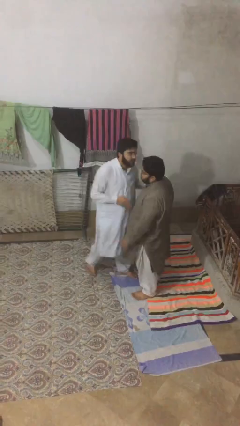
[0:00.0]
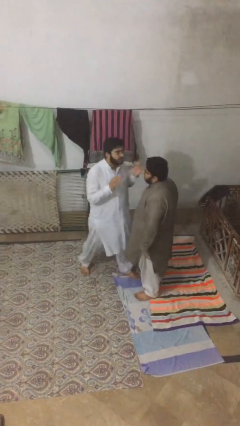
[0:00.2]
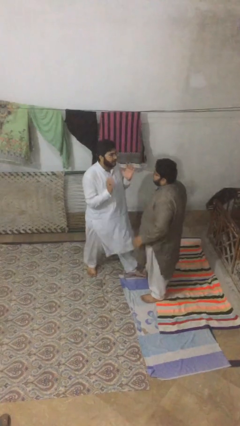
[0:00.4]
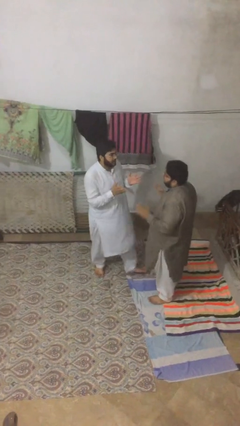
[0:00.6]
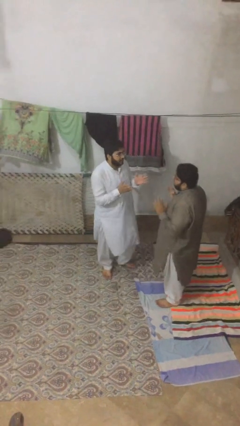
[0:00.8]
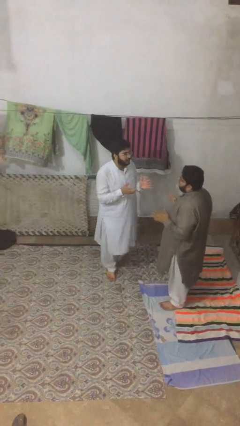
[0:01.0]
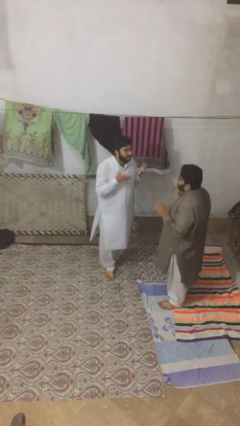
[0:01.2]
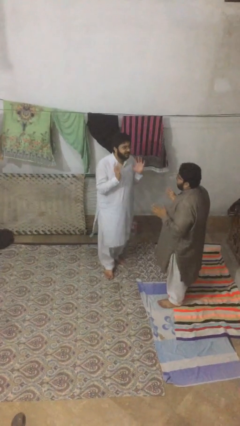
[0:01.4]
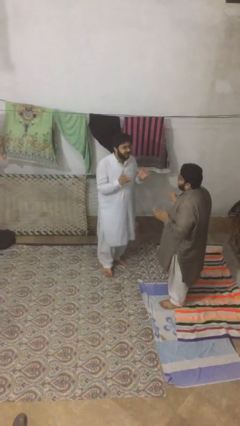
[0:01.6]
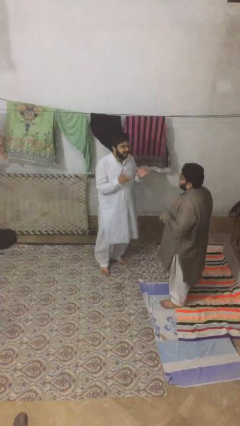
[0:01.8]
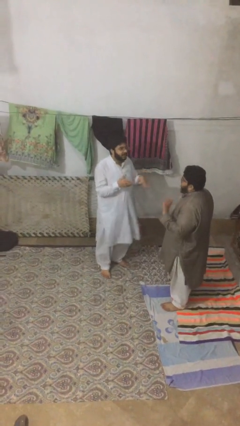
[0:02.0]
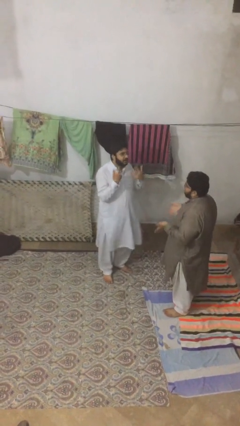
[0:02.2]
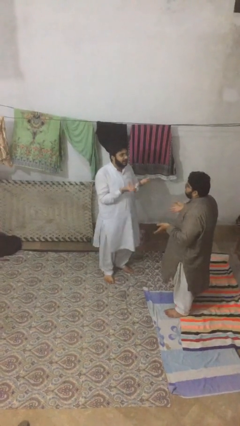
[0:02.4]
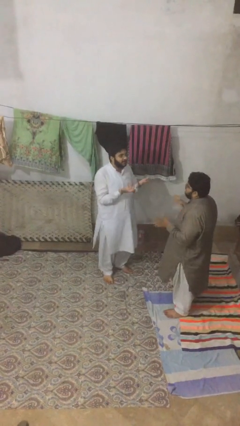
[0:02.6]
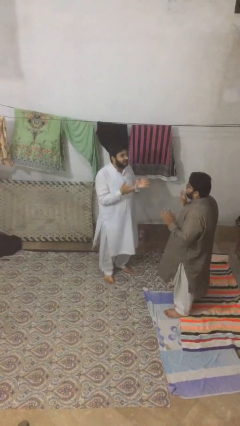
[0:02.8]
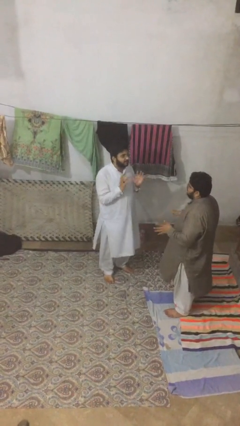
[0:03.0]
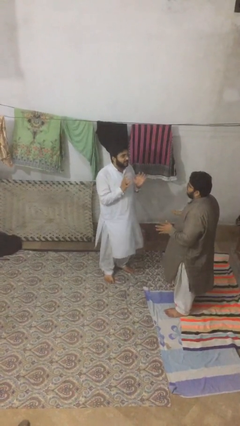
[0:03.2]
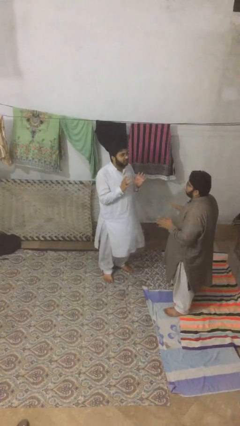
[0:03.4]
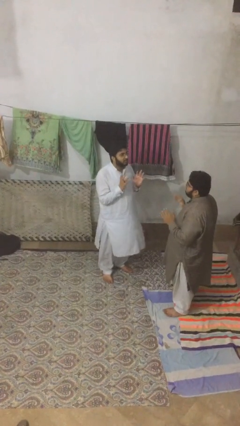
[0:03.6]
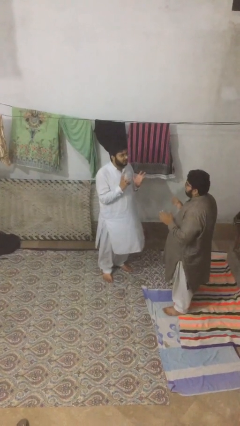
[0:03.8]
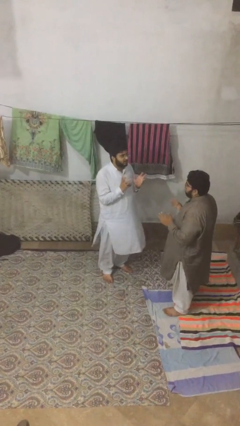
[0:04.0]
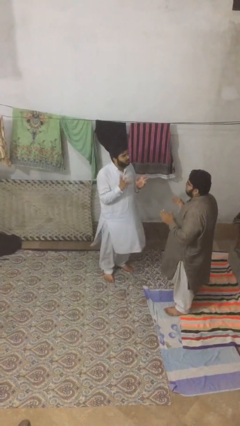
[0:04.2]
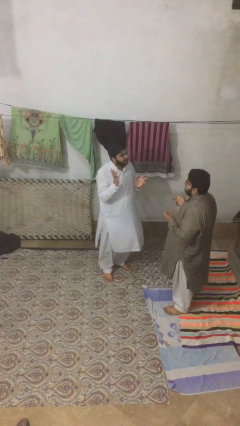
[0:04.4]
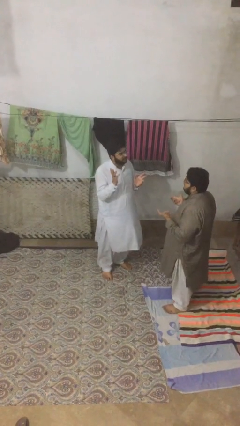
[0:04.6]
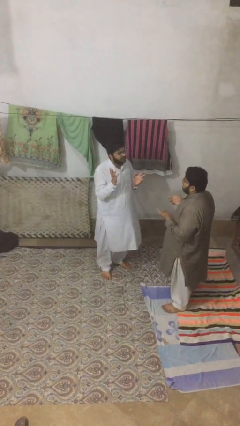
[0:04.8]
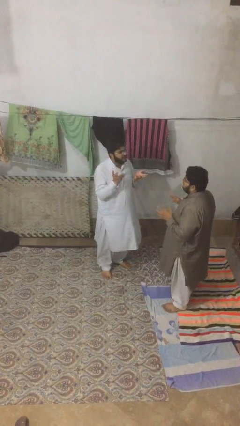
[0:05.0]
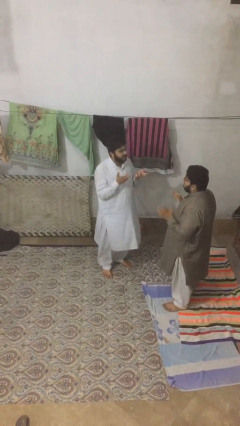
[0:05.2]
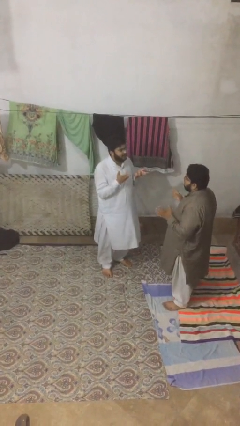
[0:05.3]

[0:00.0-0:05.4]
person talks to person

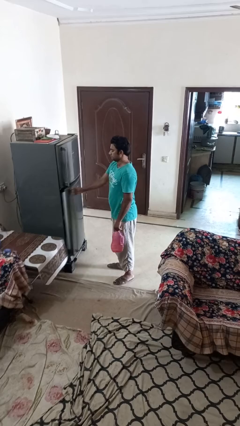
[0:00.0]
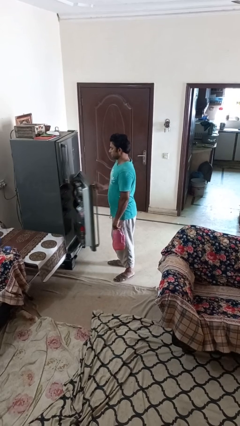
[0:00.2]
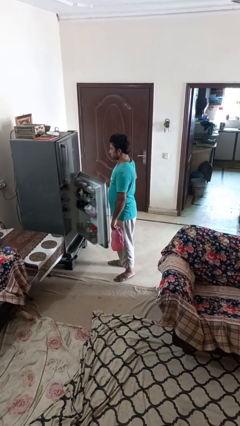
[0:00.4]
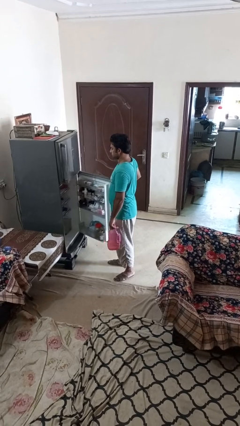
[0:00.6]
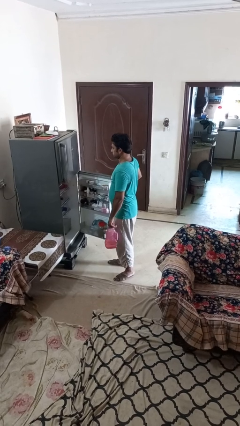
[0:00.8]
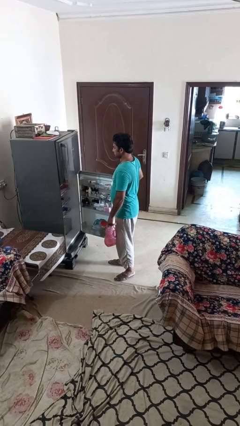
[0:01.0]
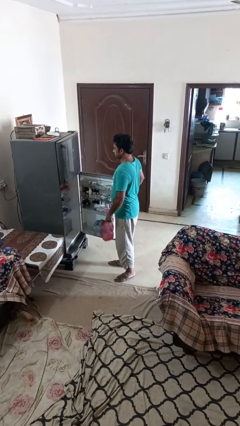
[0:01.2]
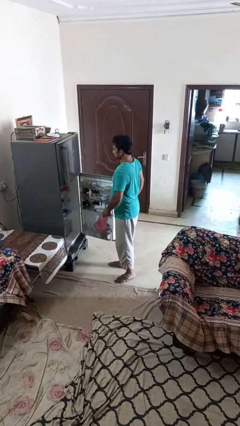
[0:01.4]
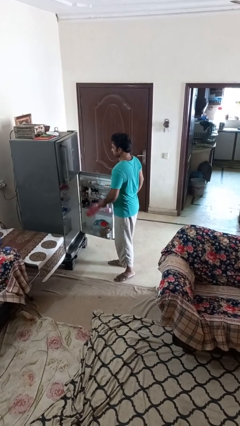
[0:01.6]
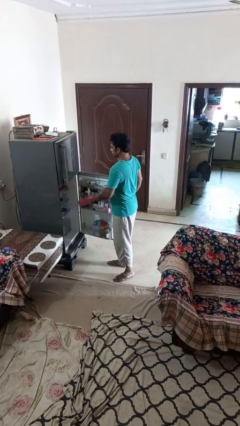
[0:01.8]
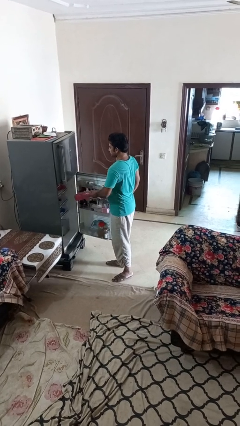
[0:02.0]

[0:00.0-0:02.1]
person opens refrigerator

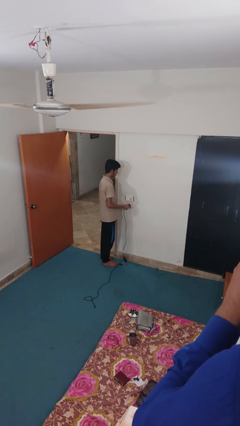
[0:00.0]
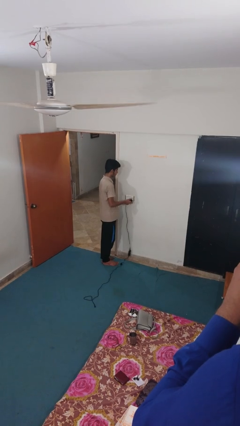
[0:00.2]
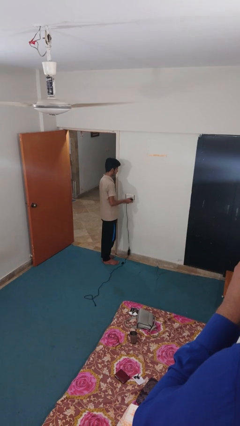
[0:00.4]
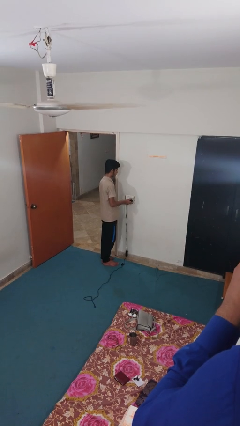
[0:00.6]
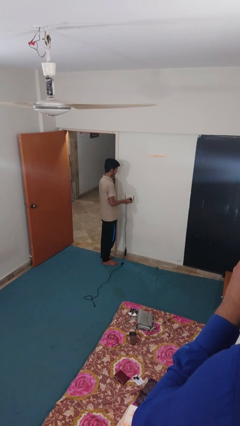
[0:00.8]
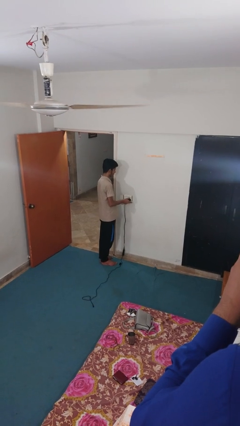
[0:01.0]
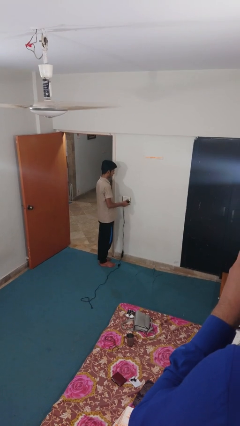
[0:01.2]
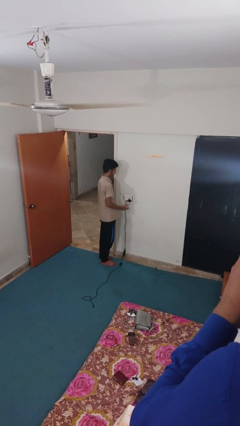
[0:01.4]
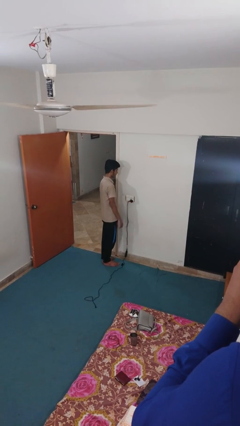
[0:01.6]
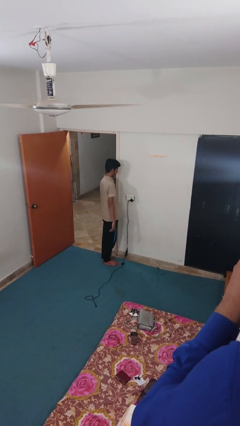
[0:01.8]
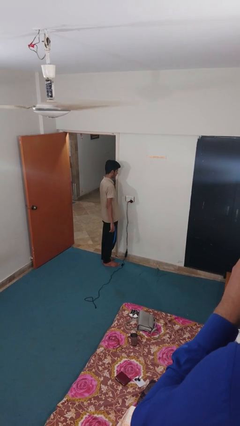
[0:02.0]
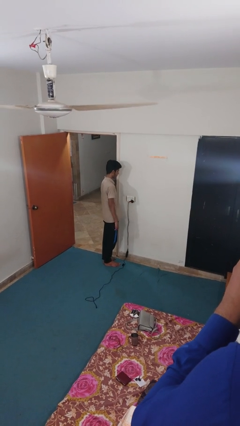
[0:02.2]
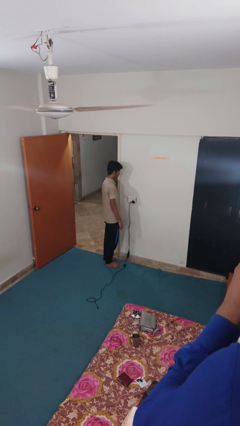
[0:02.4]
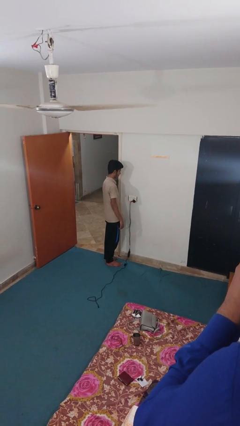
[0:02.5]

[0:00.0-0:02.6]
person plugs into electrical socket

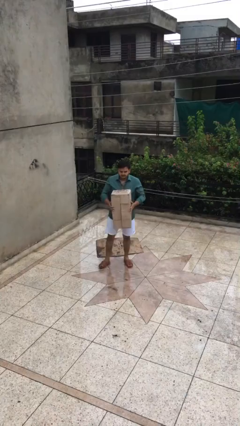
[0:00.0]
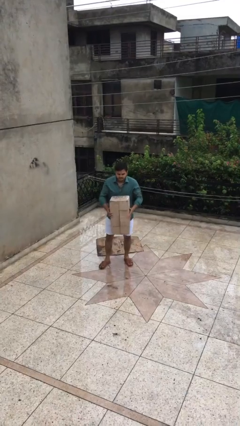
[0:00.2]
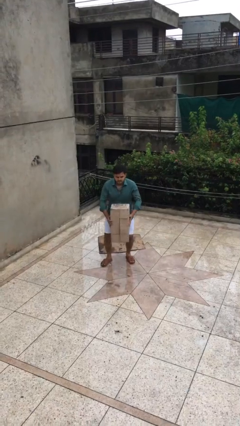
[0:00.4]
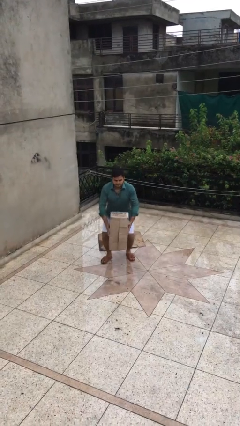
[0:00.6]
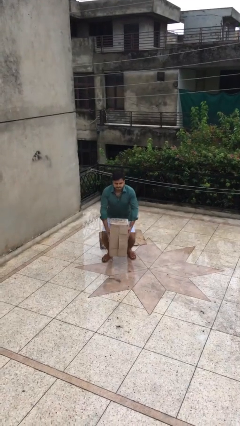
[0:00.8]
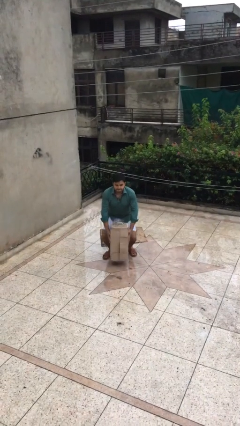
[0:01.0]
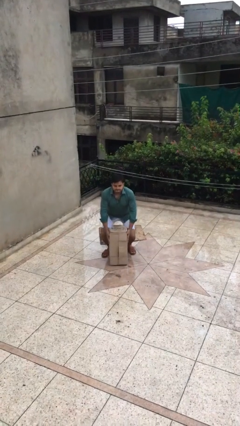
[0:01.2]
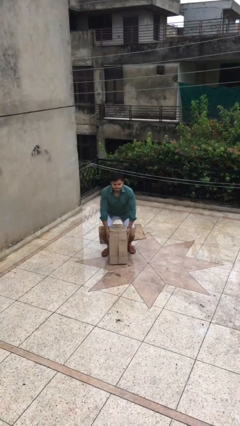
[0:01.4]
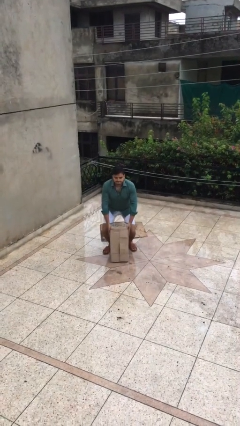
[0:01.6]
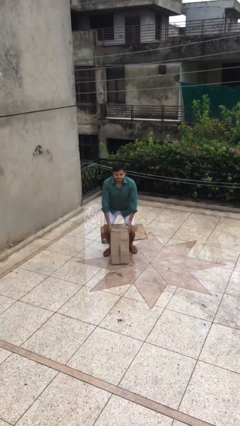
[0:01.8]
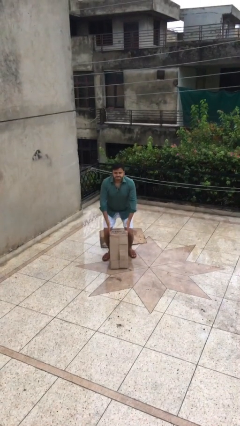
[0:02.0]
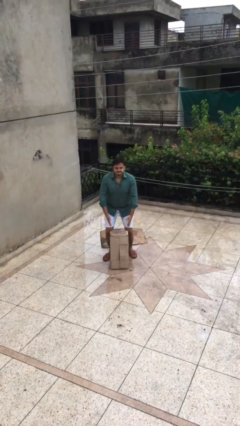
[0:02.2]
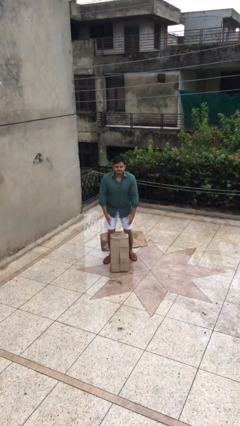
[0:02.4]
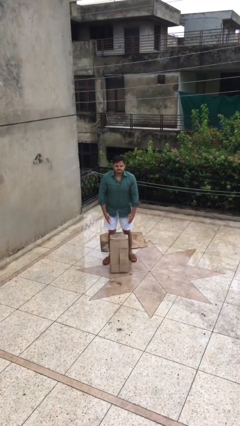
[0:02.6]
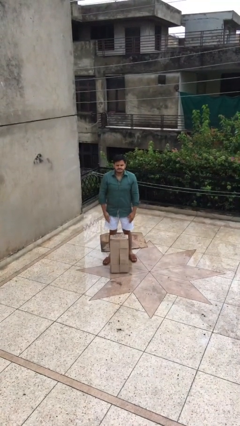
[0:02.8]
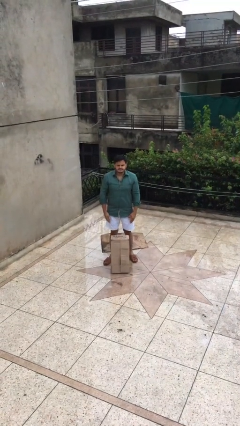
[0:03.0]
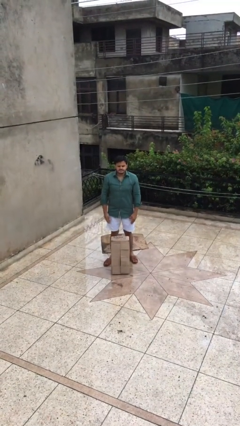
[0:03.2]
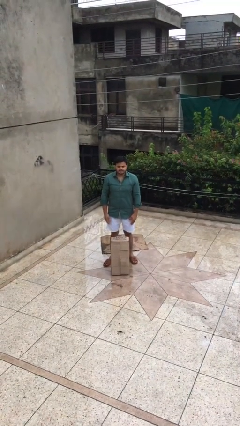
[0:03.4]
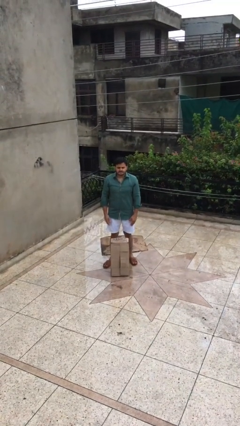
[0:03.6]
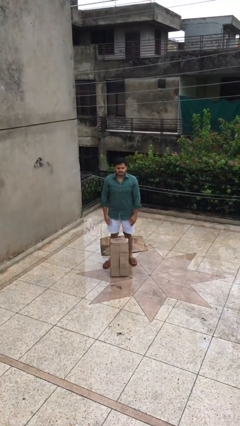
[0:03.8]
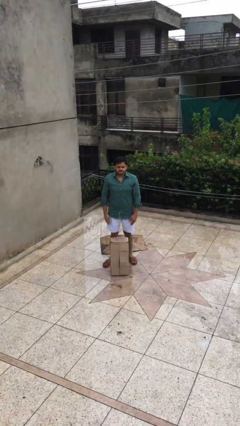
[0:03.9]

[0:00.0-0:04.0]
person puts down object on floor

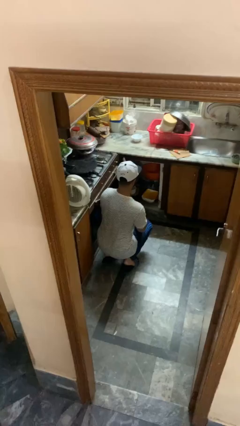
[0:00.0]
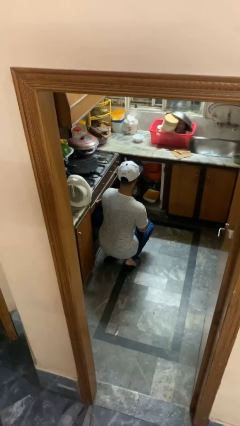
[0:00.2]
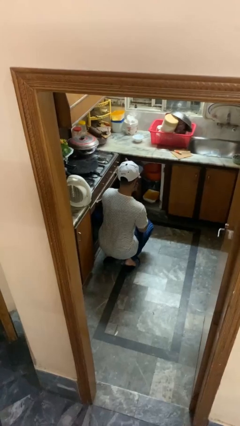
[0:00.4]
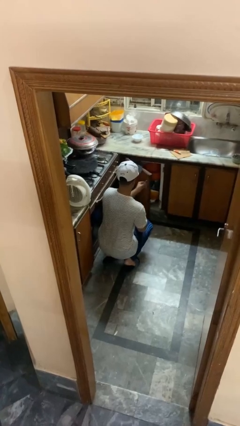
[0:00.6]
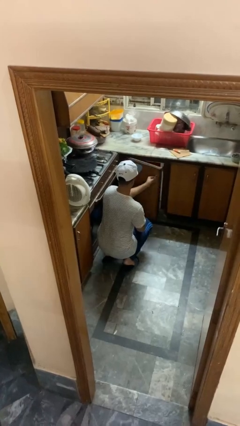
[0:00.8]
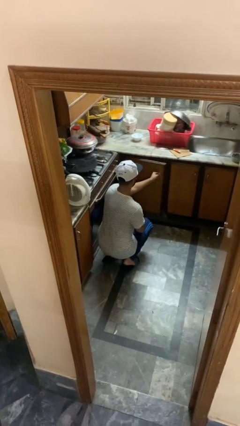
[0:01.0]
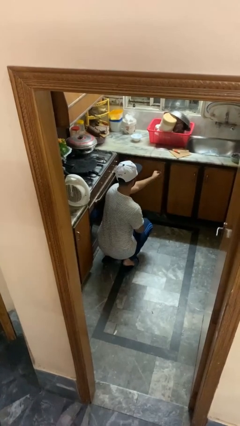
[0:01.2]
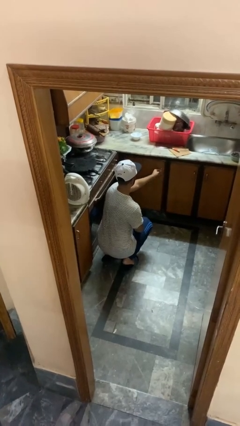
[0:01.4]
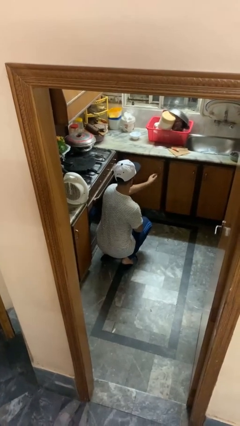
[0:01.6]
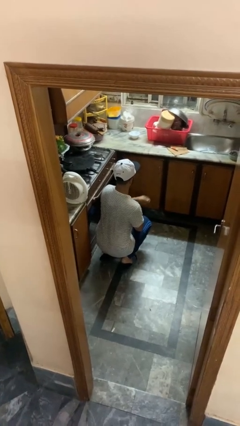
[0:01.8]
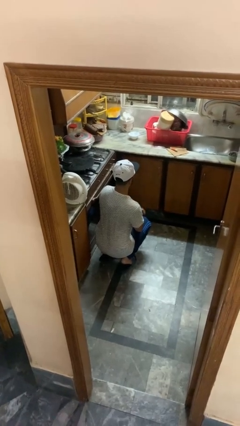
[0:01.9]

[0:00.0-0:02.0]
person closes kitchen drawer

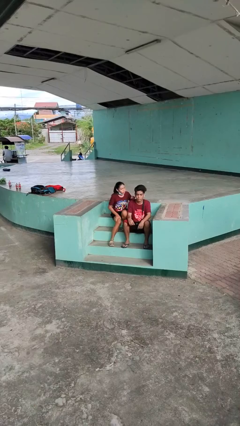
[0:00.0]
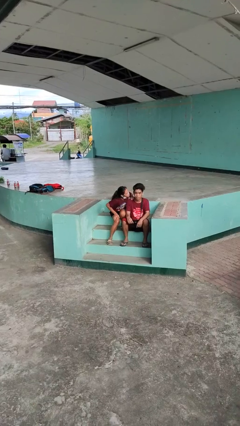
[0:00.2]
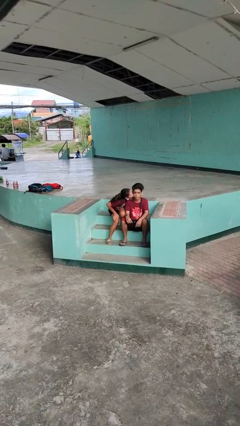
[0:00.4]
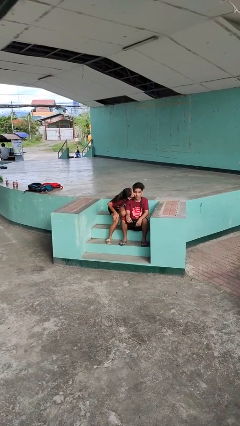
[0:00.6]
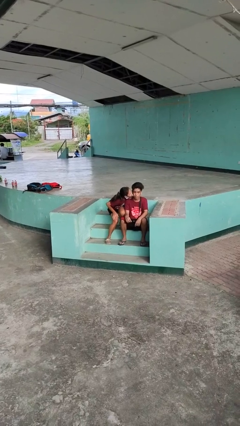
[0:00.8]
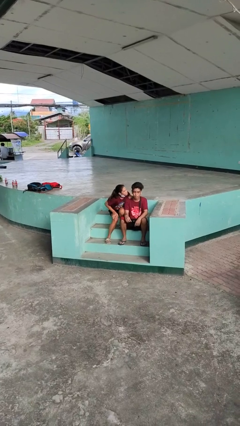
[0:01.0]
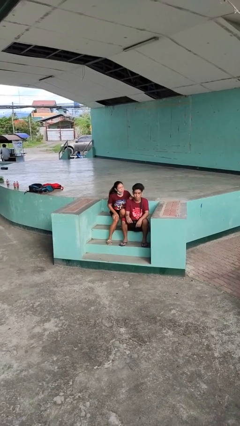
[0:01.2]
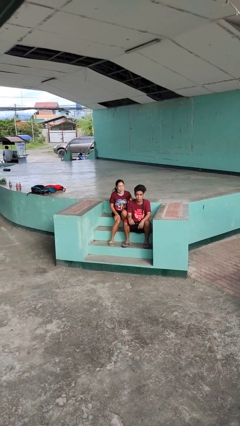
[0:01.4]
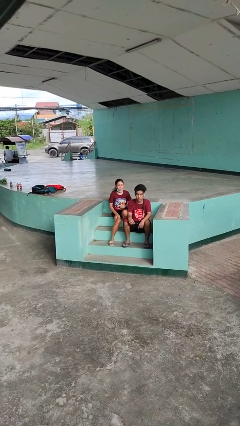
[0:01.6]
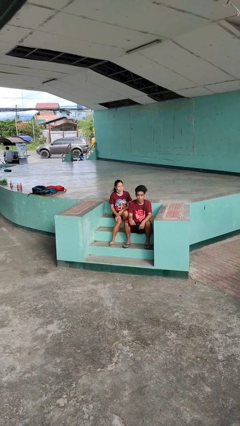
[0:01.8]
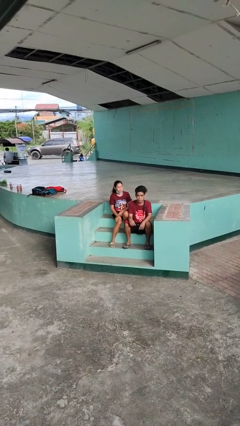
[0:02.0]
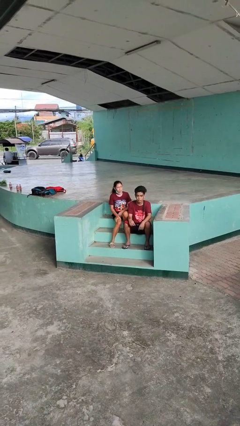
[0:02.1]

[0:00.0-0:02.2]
person kisses cheek of person
